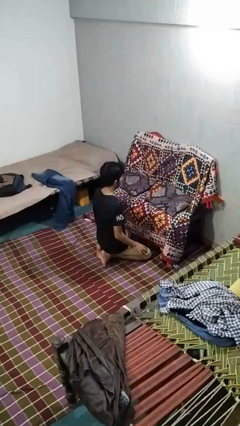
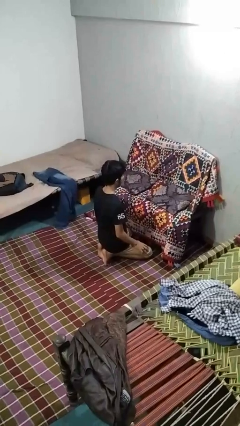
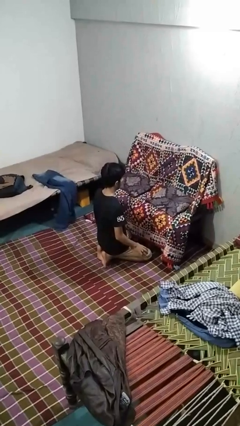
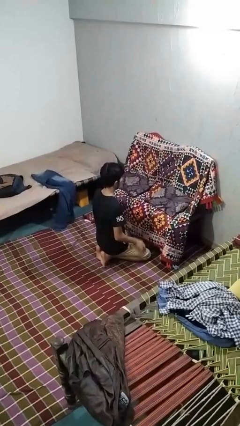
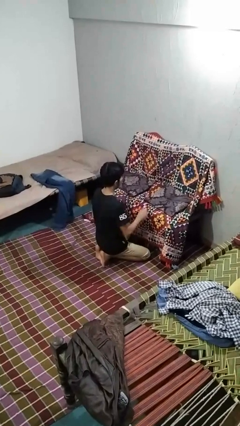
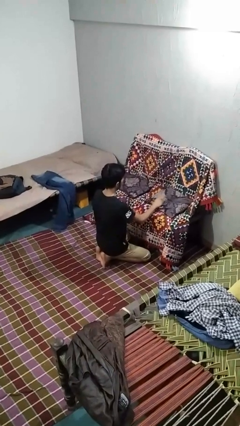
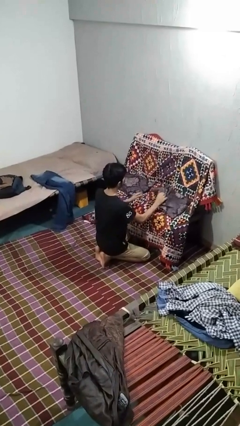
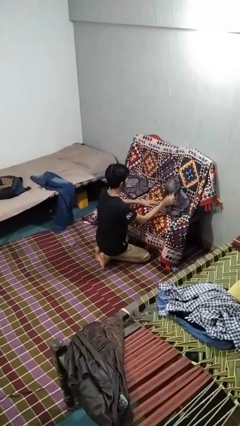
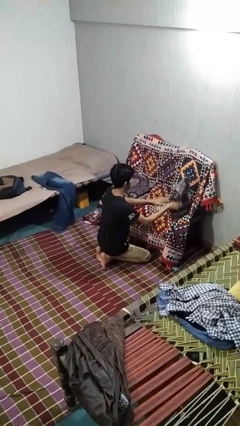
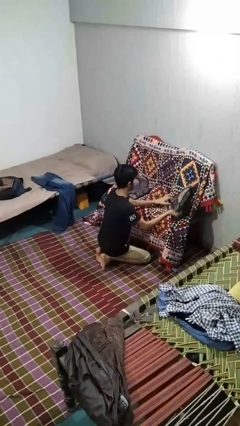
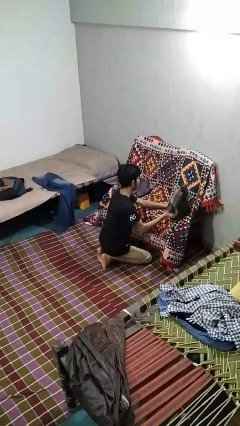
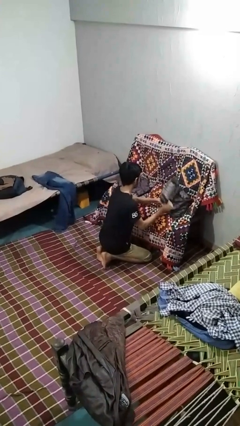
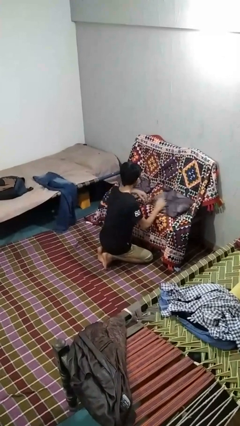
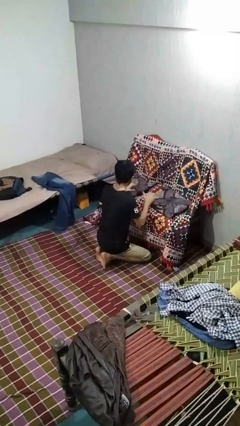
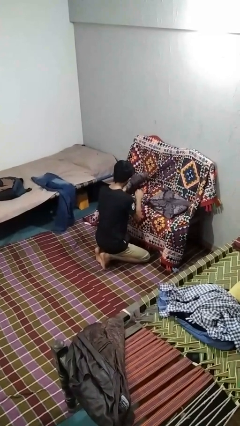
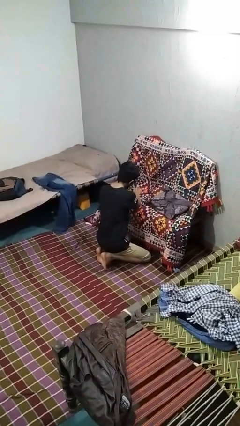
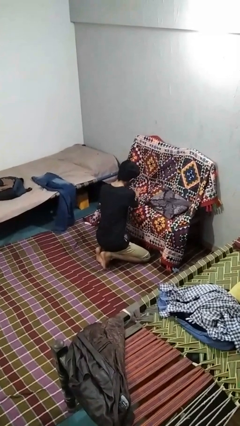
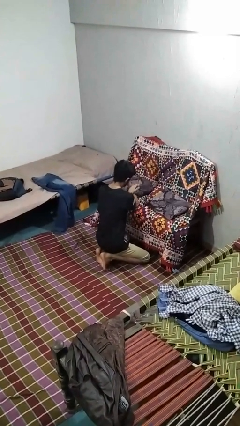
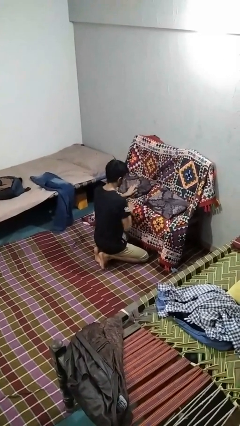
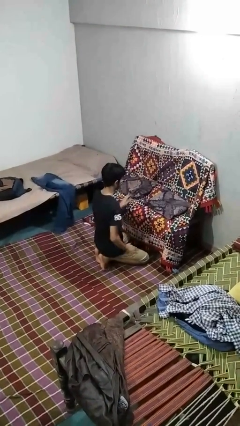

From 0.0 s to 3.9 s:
person searches in couch

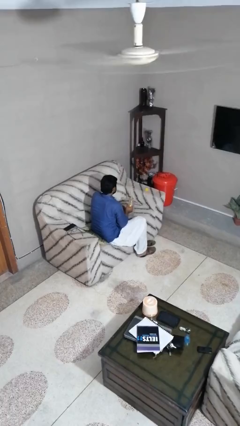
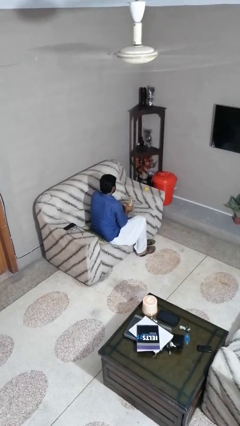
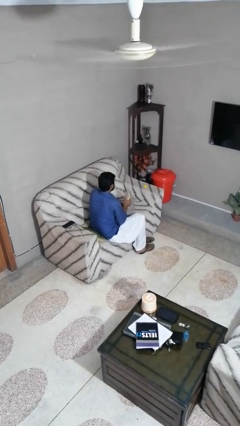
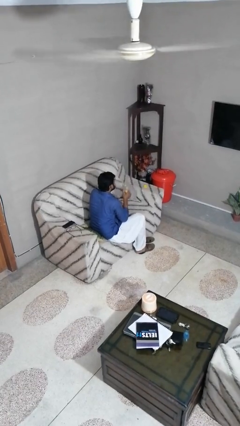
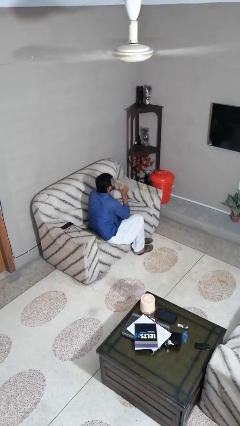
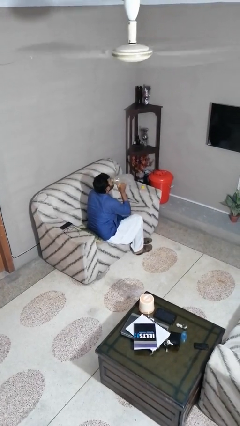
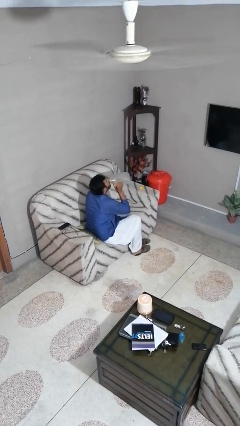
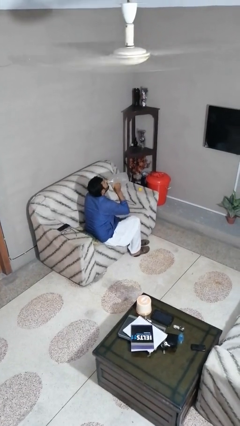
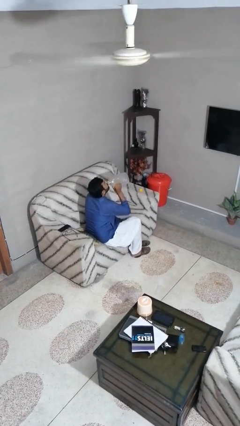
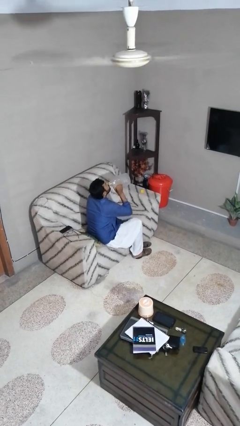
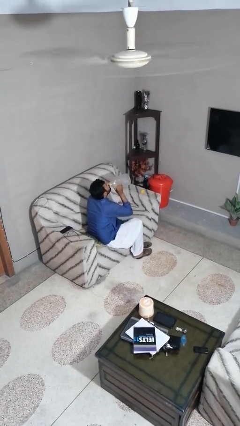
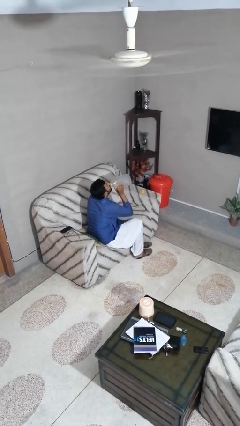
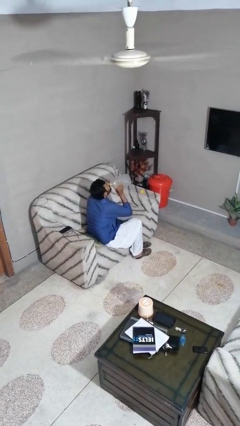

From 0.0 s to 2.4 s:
person drinks from bottle

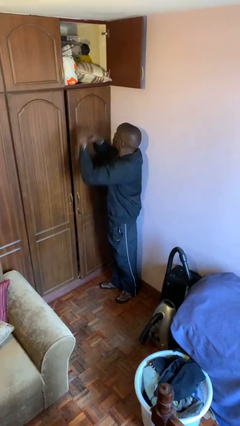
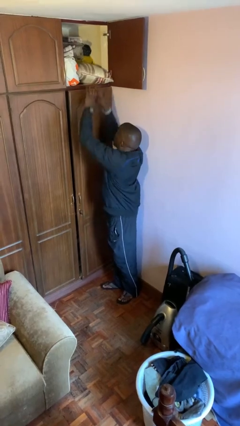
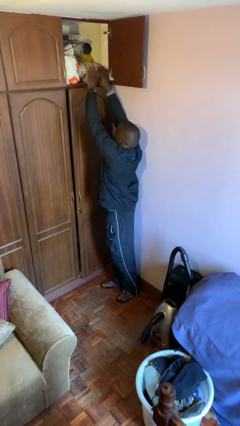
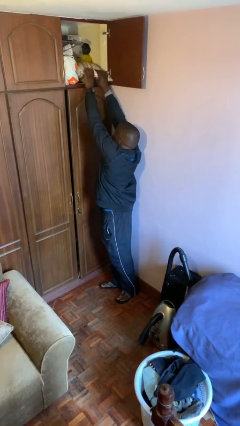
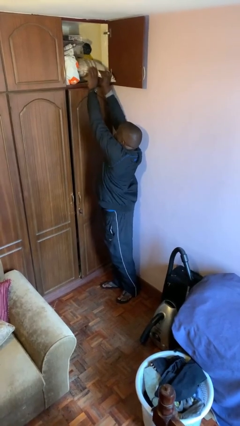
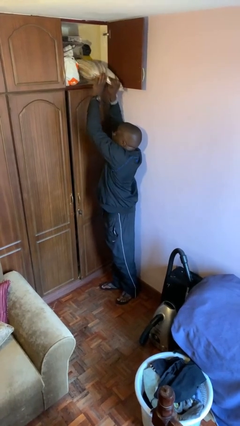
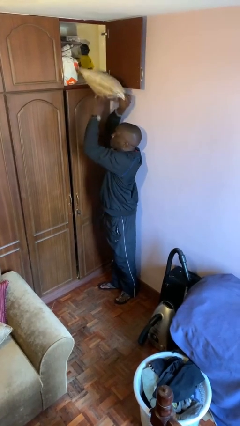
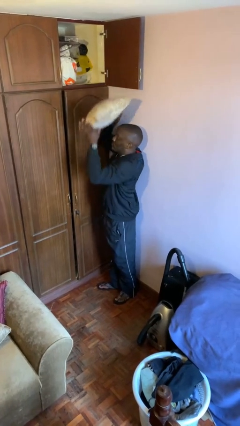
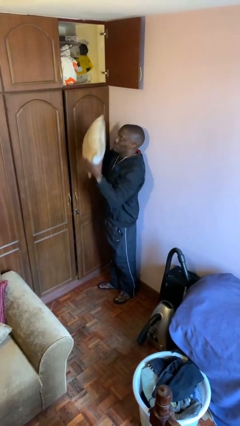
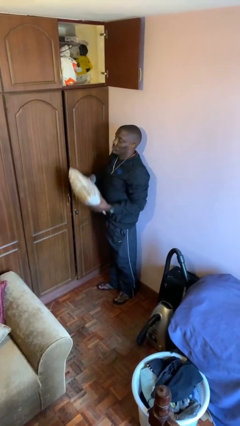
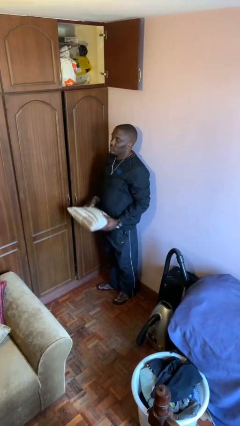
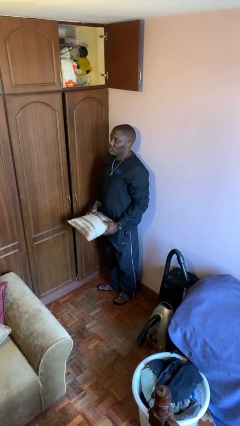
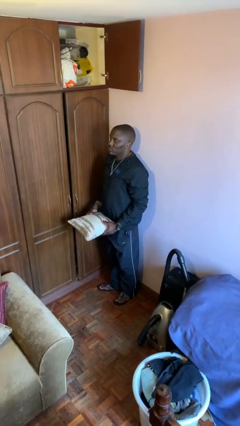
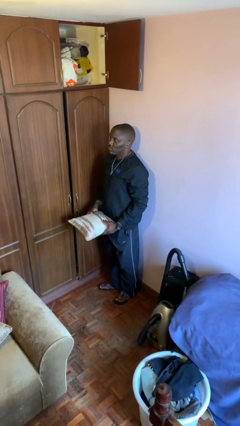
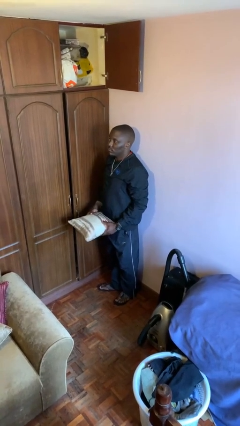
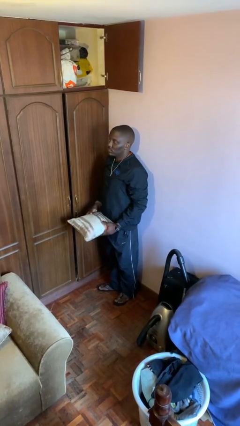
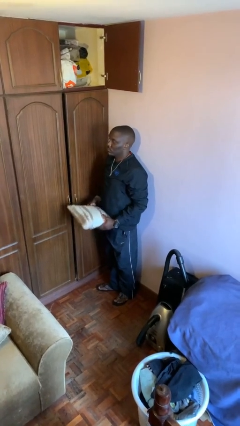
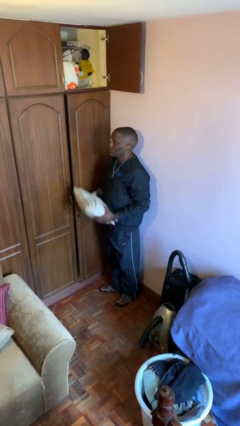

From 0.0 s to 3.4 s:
person picks up object from shelf

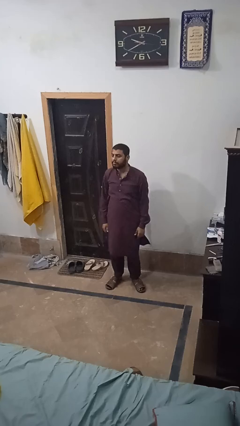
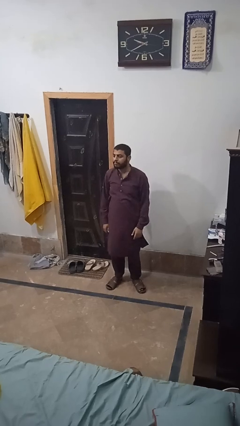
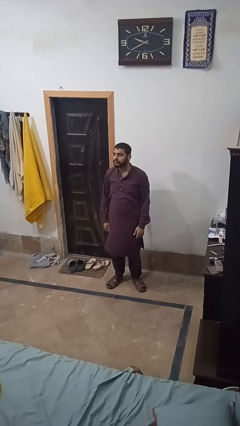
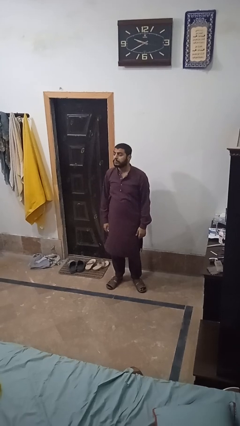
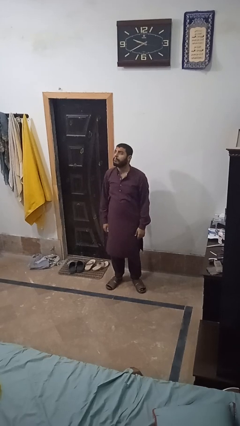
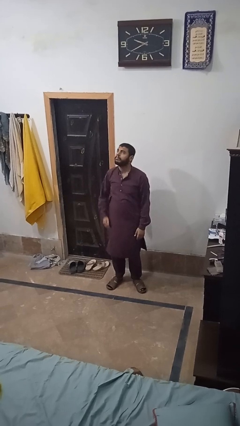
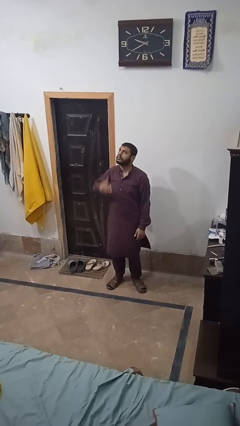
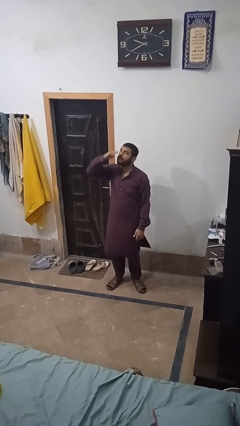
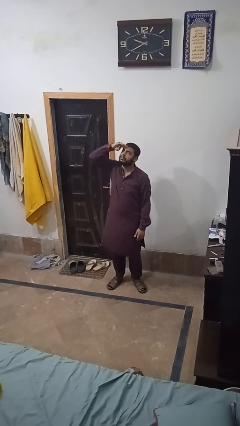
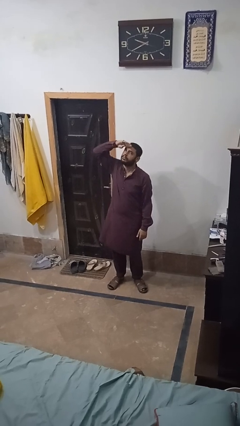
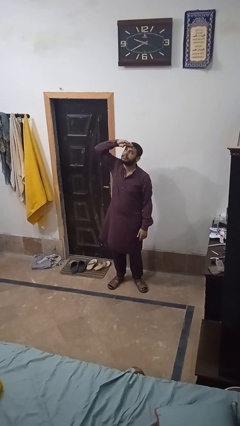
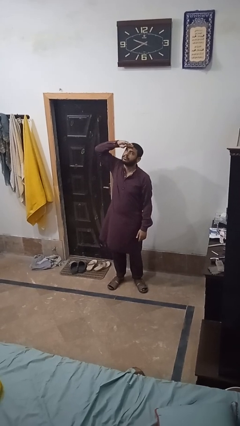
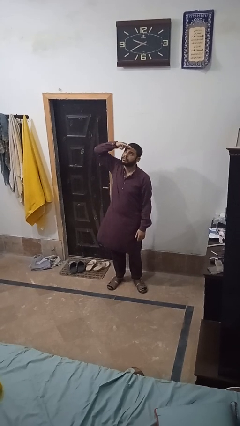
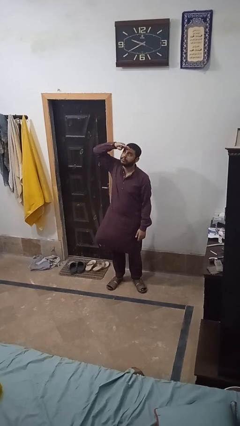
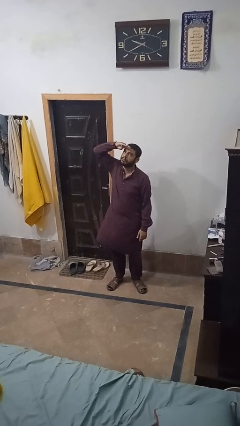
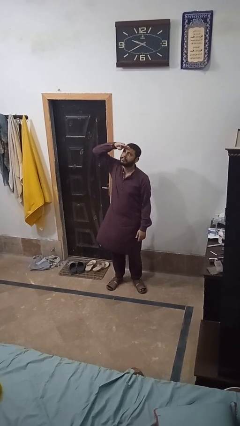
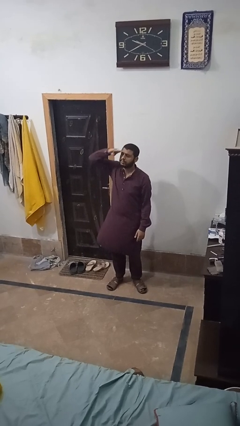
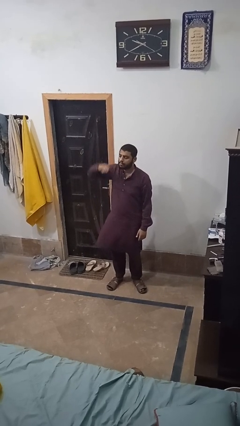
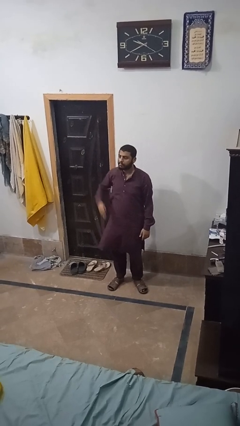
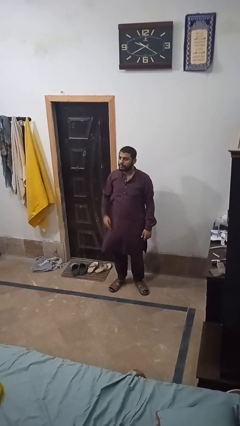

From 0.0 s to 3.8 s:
person shades eyes

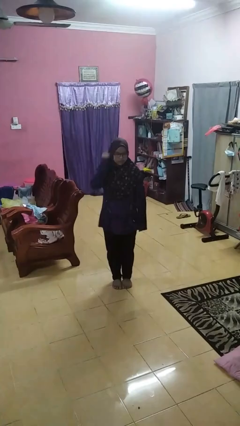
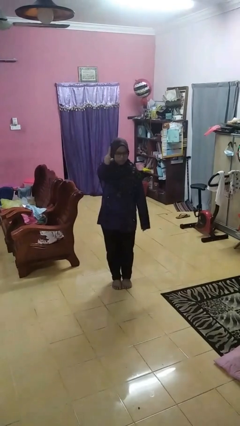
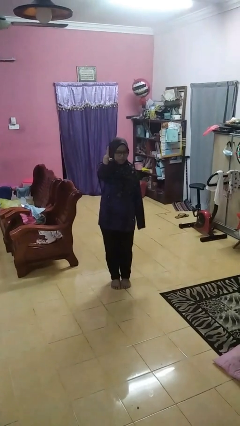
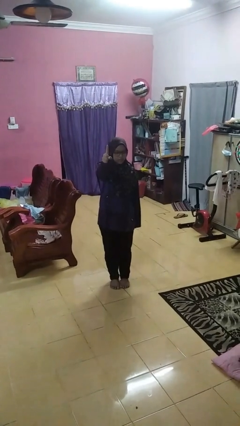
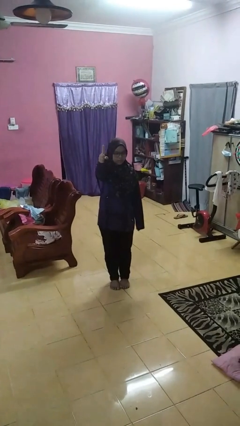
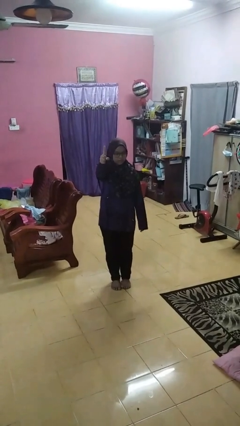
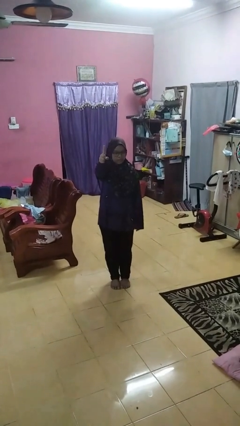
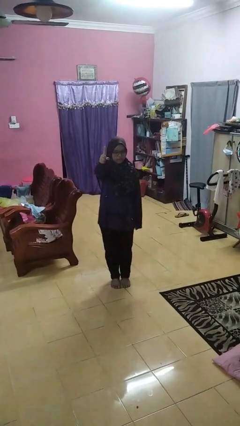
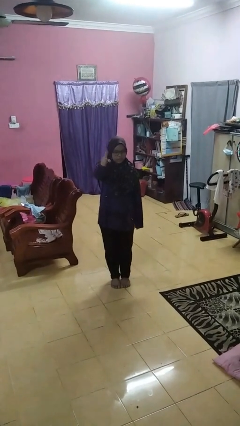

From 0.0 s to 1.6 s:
person gestures number one

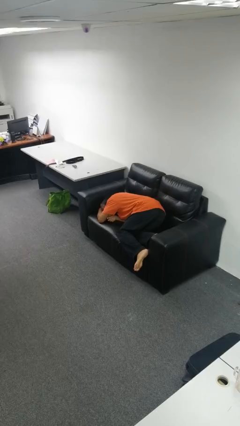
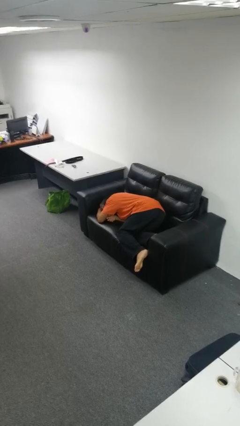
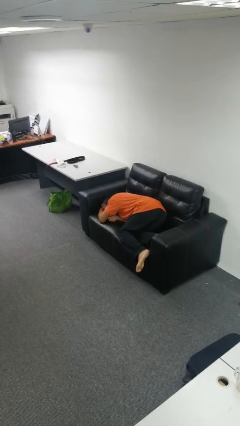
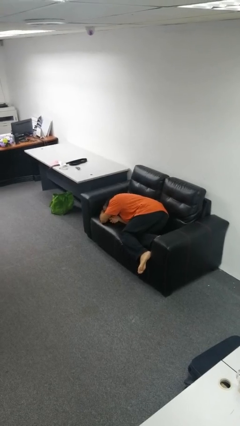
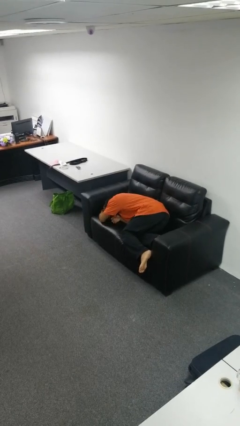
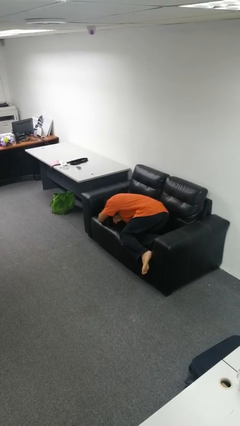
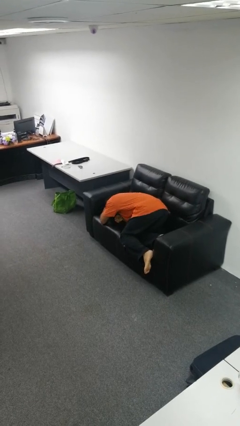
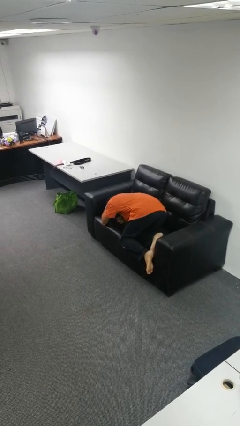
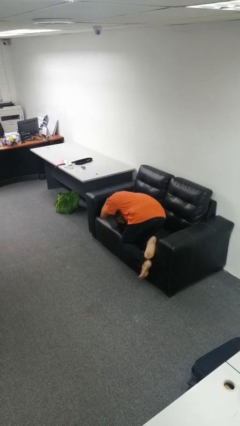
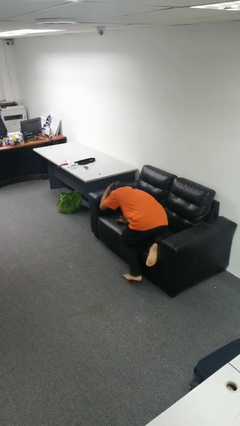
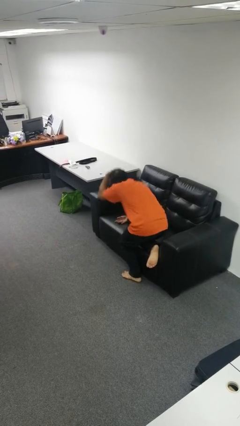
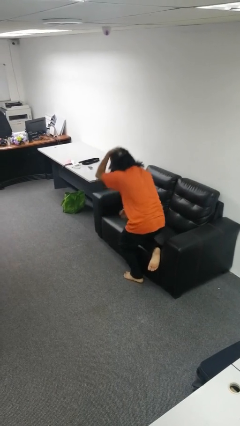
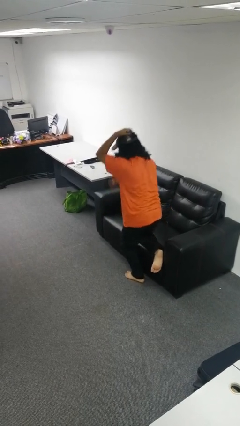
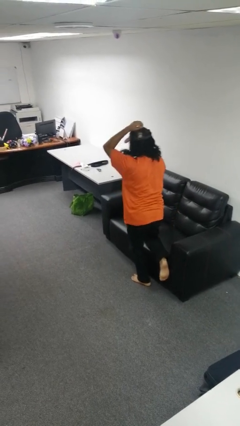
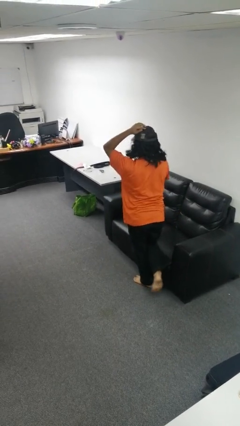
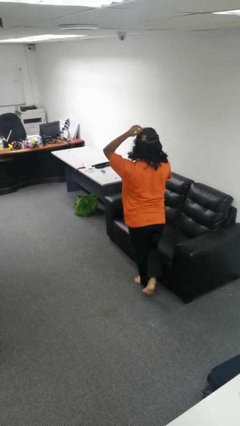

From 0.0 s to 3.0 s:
person stands up
